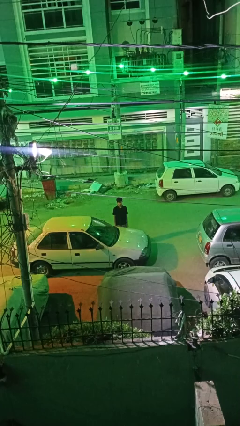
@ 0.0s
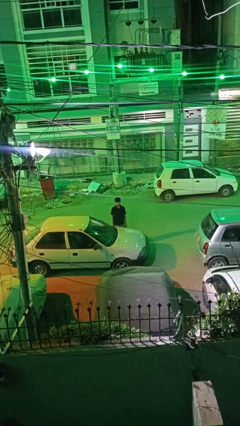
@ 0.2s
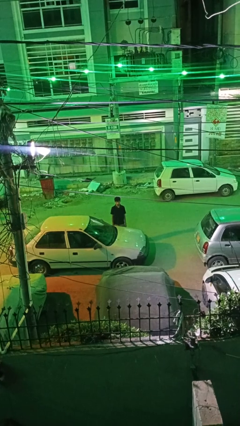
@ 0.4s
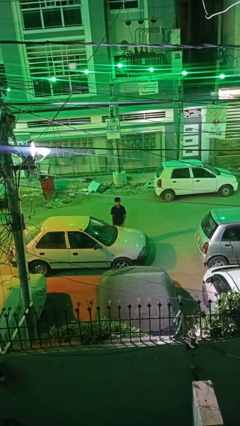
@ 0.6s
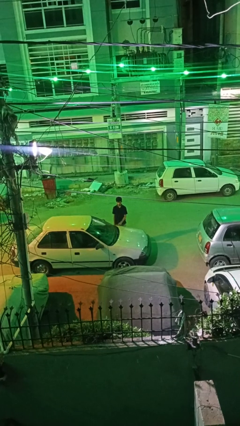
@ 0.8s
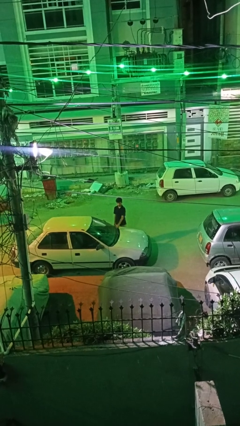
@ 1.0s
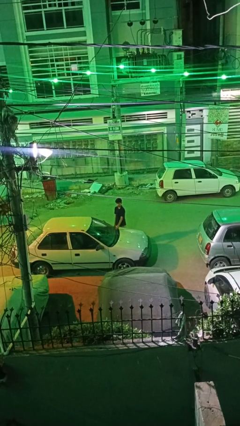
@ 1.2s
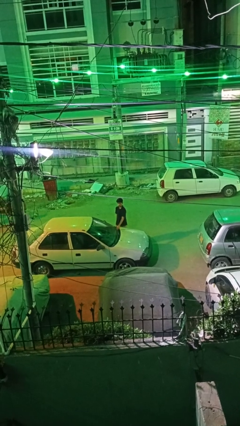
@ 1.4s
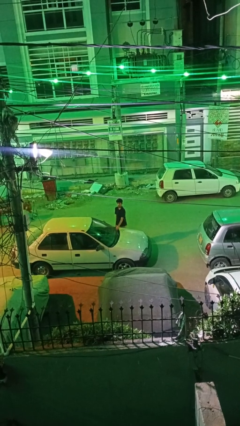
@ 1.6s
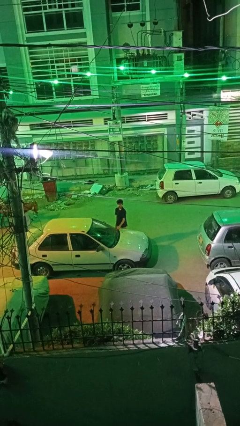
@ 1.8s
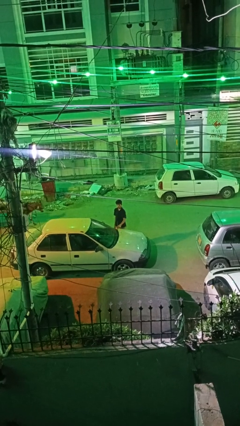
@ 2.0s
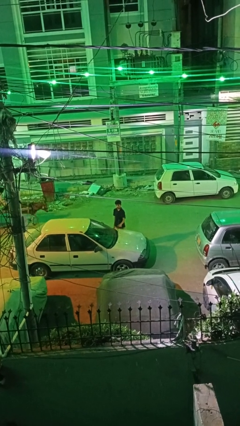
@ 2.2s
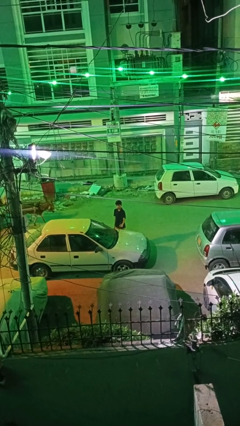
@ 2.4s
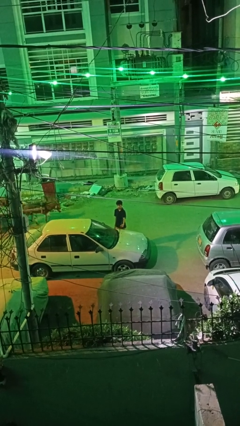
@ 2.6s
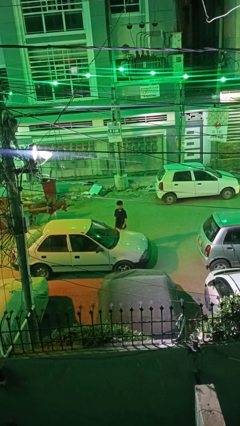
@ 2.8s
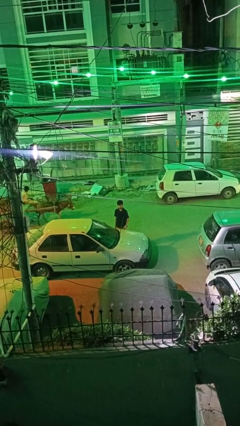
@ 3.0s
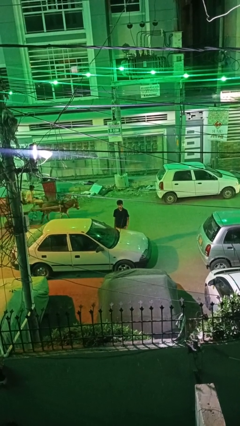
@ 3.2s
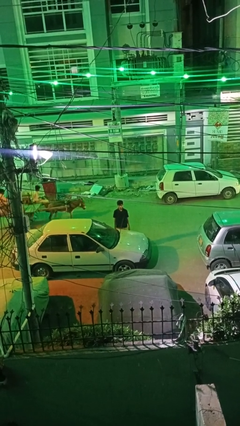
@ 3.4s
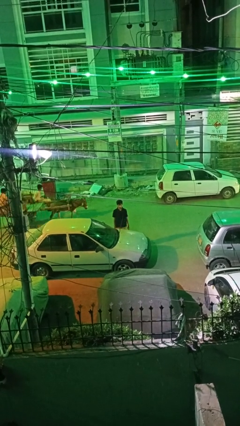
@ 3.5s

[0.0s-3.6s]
person flips up car wipers

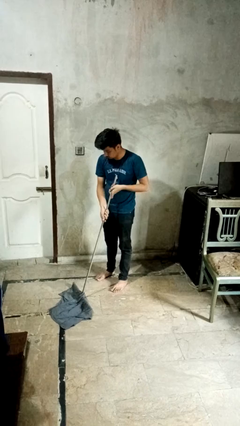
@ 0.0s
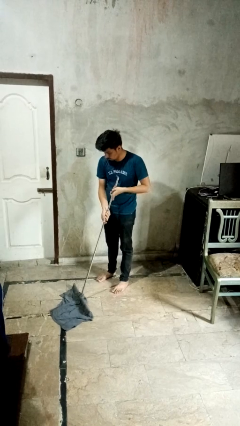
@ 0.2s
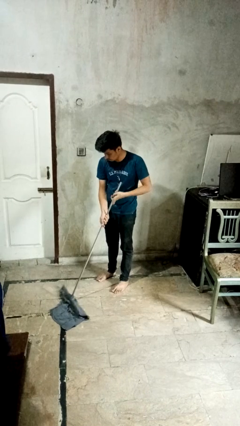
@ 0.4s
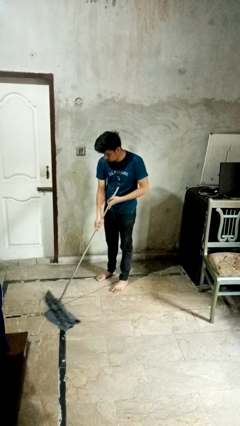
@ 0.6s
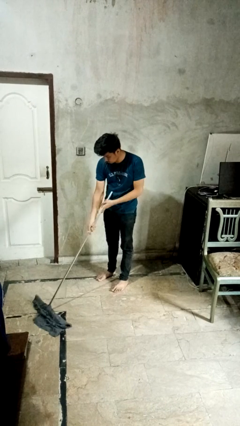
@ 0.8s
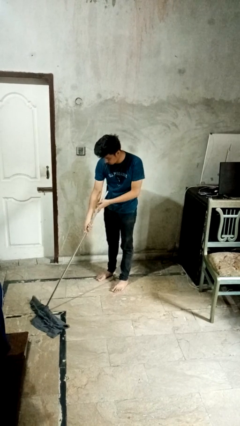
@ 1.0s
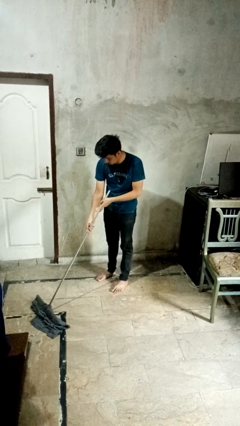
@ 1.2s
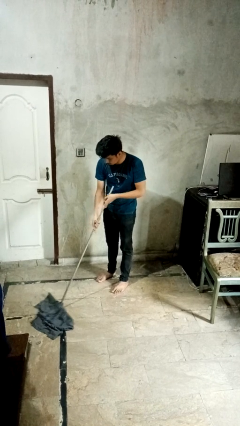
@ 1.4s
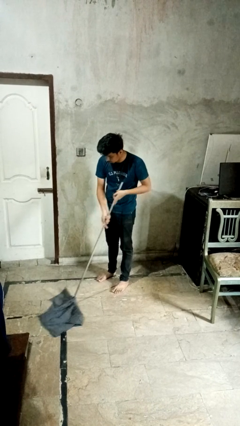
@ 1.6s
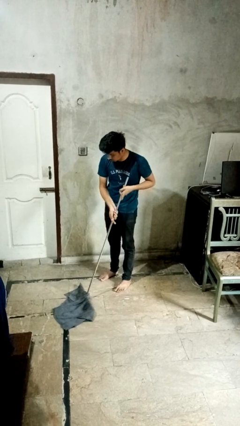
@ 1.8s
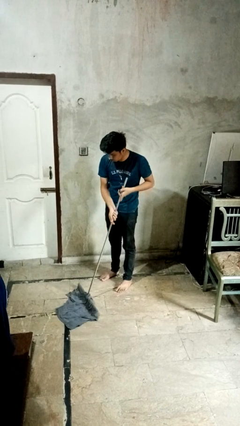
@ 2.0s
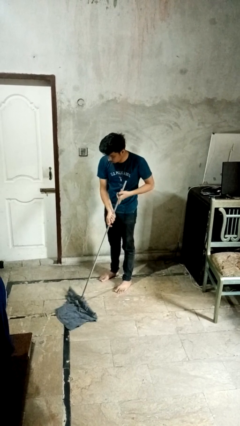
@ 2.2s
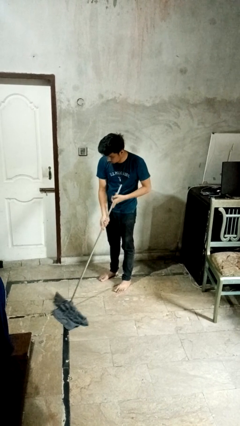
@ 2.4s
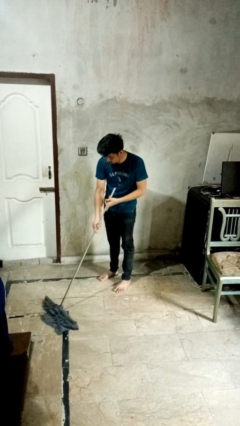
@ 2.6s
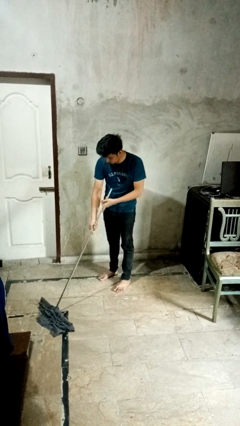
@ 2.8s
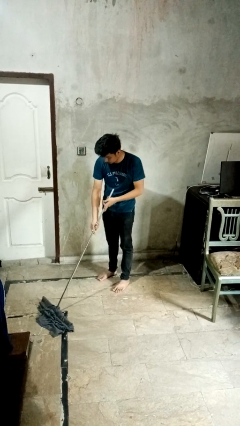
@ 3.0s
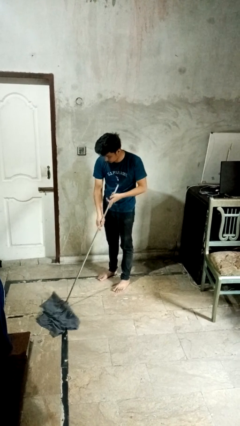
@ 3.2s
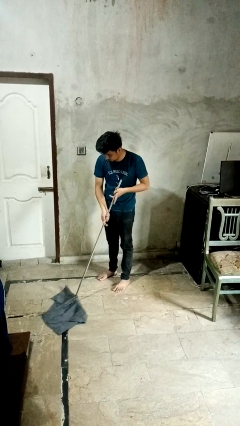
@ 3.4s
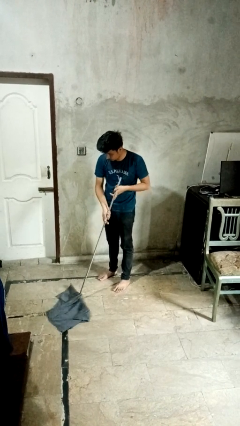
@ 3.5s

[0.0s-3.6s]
person mops

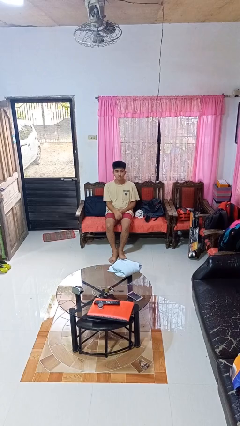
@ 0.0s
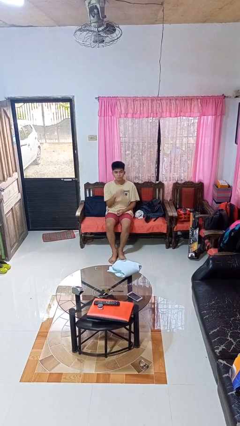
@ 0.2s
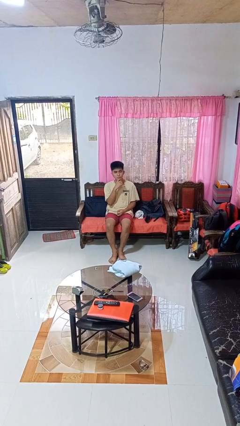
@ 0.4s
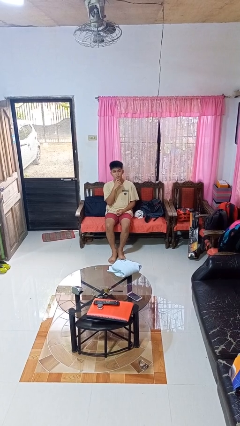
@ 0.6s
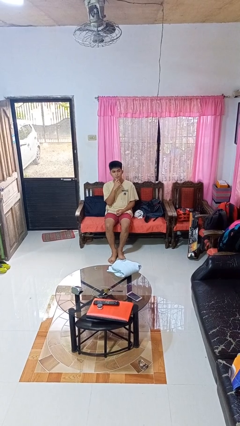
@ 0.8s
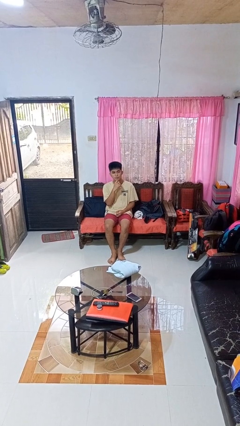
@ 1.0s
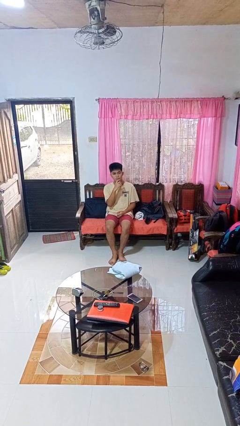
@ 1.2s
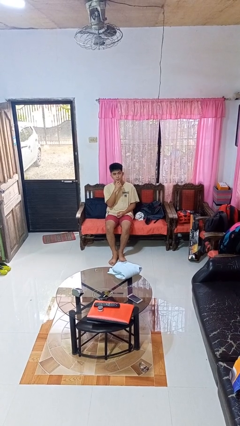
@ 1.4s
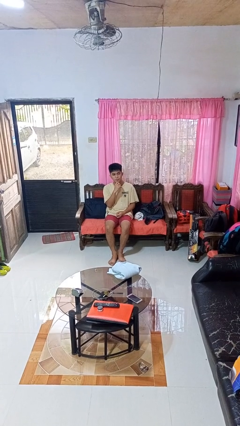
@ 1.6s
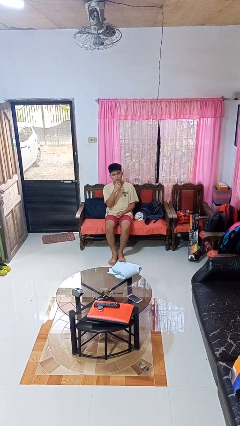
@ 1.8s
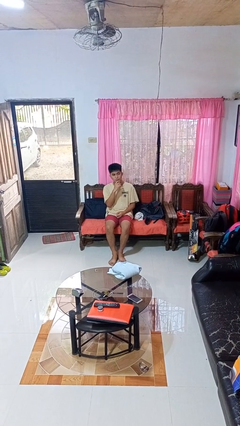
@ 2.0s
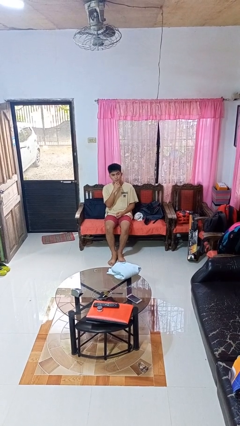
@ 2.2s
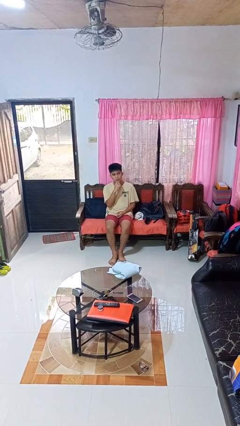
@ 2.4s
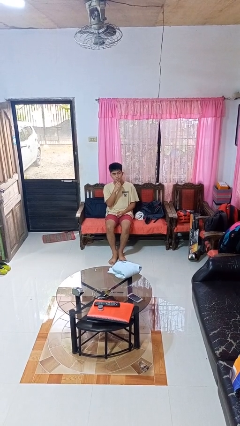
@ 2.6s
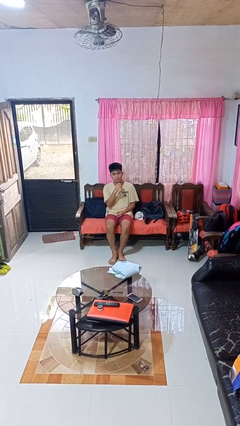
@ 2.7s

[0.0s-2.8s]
person strokes chin

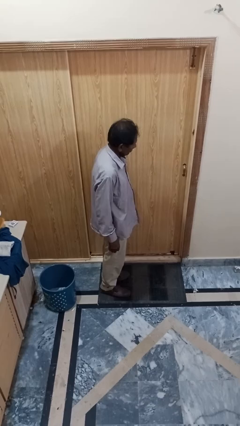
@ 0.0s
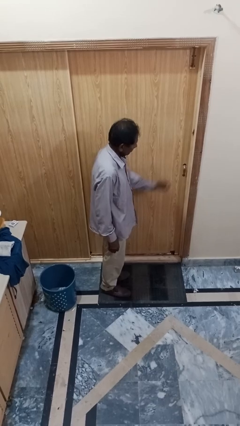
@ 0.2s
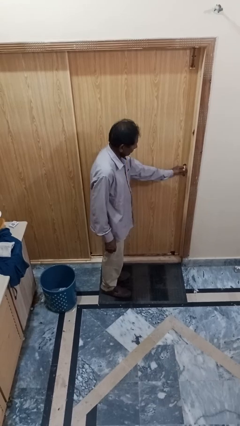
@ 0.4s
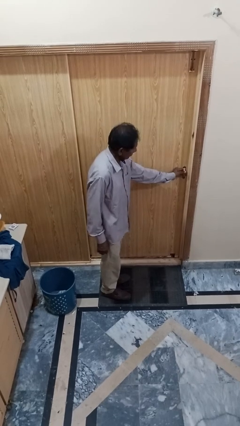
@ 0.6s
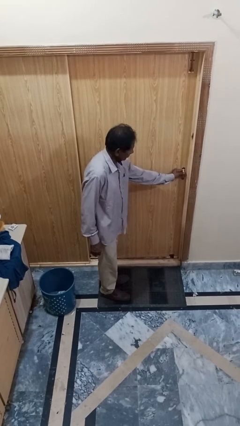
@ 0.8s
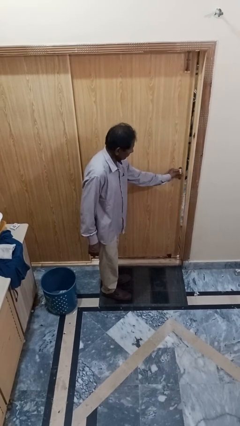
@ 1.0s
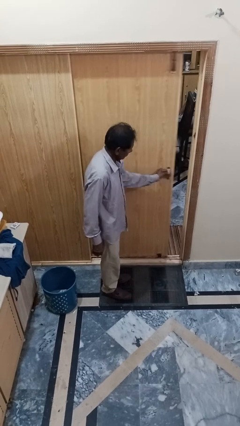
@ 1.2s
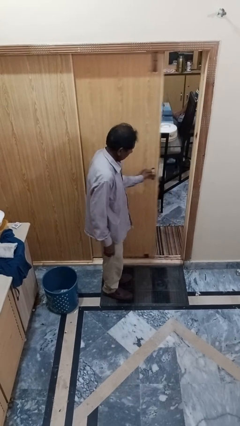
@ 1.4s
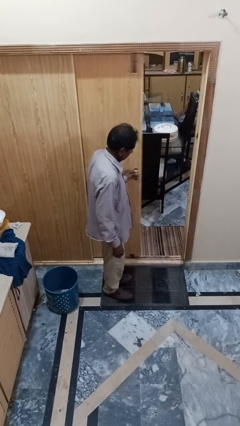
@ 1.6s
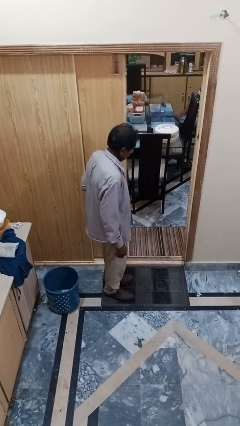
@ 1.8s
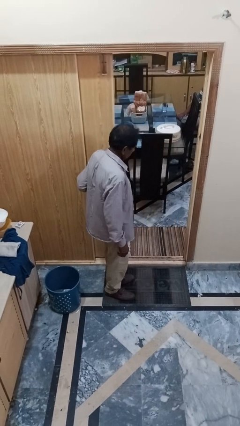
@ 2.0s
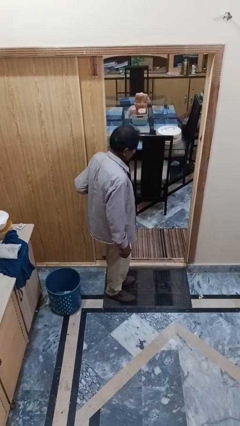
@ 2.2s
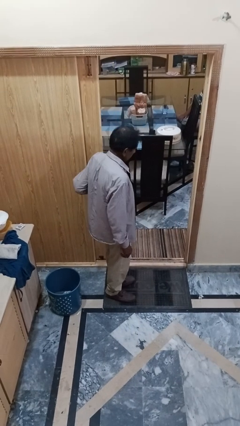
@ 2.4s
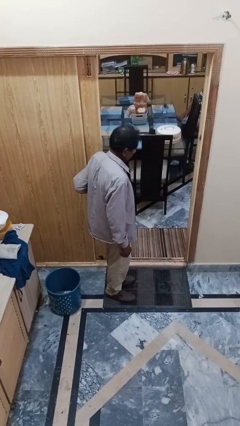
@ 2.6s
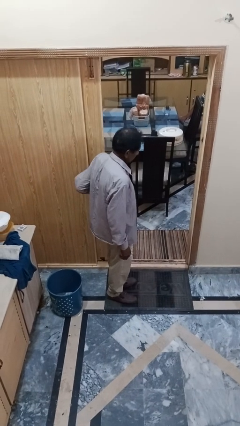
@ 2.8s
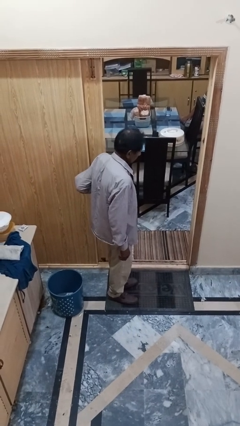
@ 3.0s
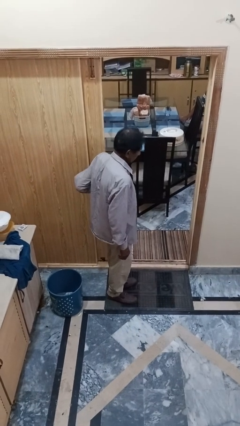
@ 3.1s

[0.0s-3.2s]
person opens sliding door

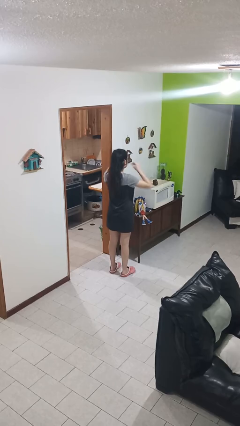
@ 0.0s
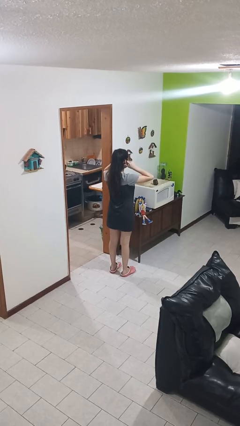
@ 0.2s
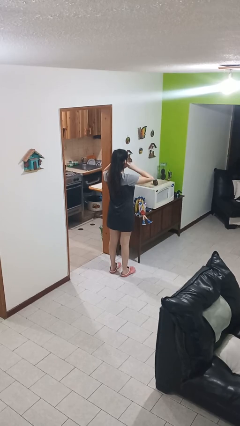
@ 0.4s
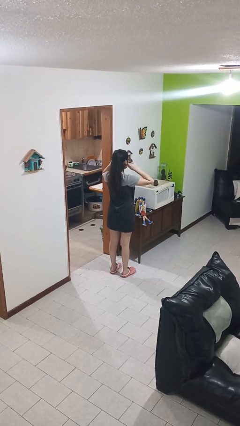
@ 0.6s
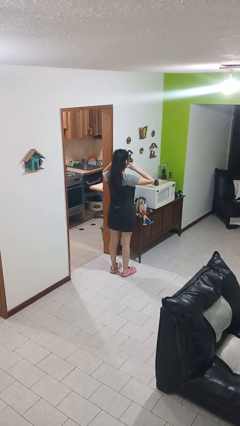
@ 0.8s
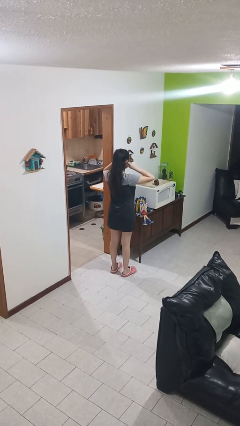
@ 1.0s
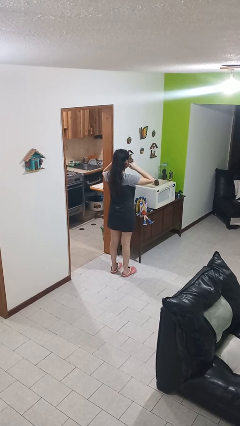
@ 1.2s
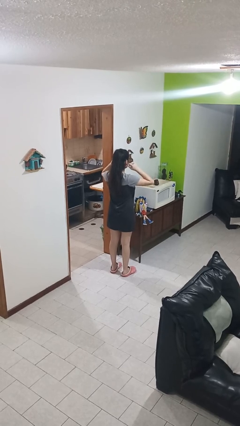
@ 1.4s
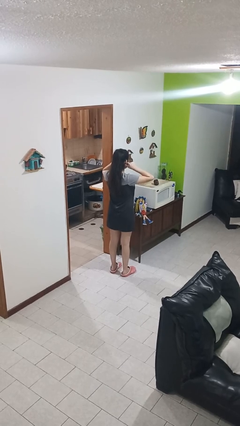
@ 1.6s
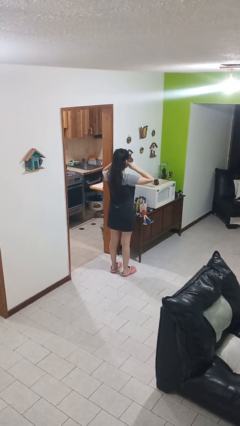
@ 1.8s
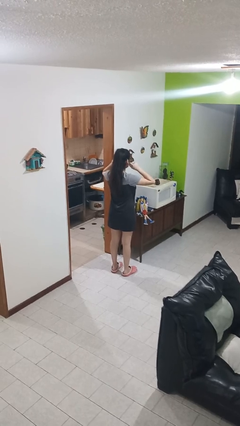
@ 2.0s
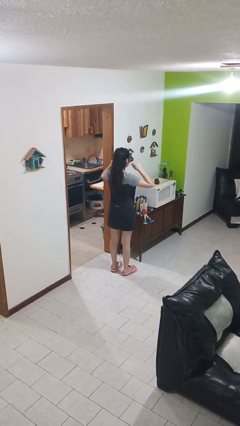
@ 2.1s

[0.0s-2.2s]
person touches earlobe

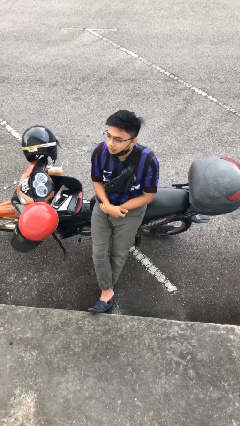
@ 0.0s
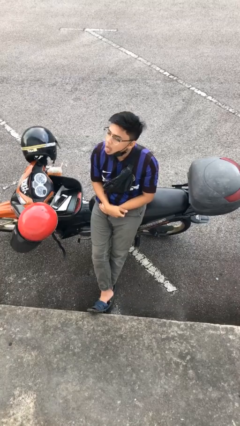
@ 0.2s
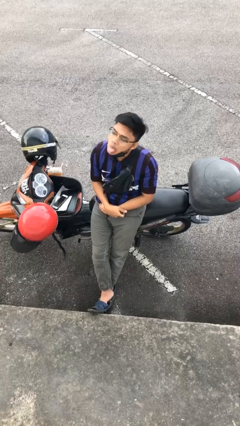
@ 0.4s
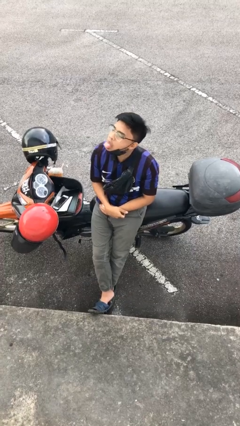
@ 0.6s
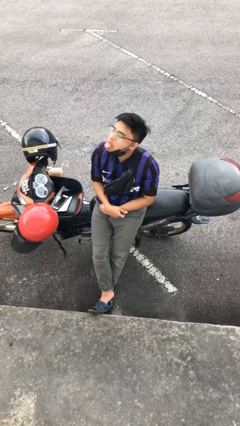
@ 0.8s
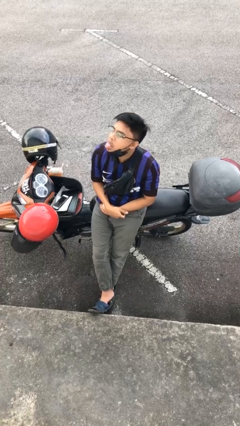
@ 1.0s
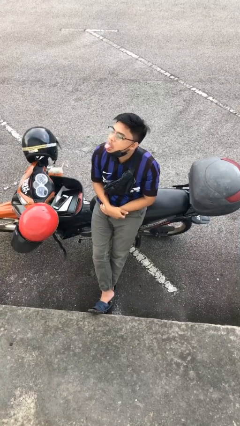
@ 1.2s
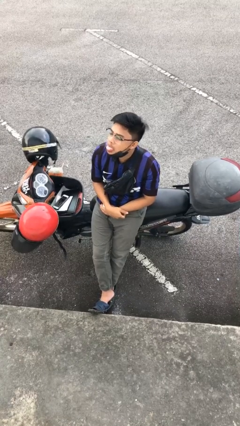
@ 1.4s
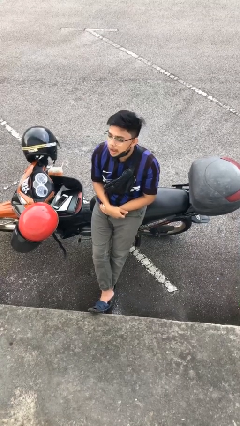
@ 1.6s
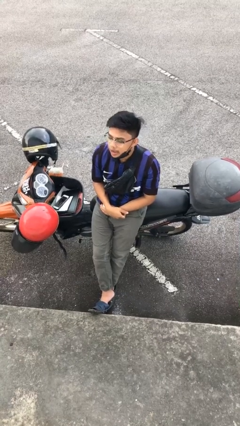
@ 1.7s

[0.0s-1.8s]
person sticks out tongue

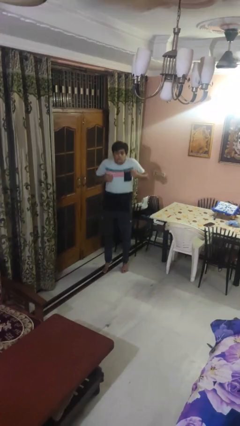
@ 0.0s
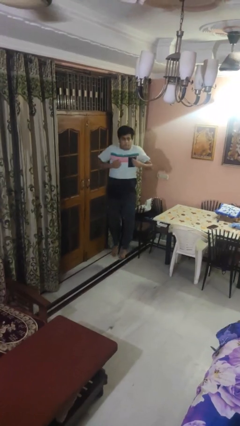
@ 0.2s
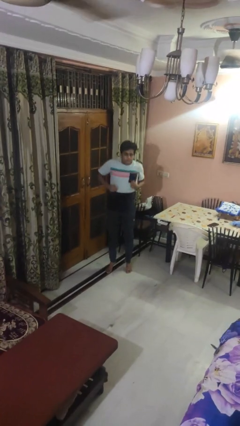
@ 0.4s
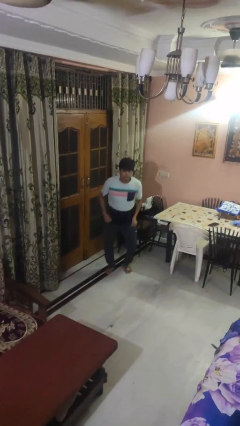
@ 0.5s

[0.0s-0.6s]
person jumps
